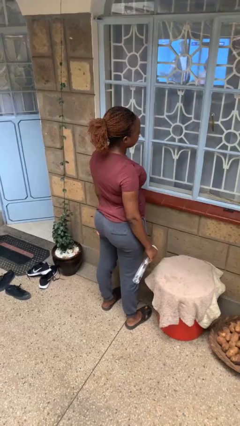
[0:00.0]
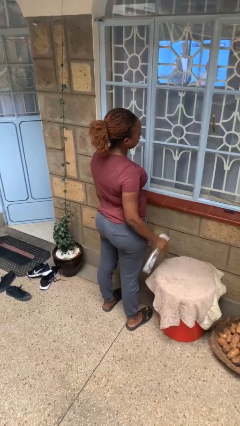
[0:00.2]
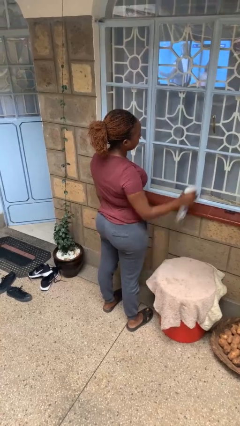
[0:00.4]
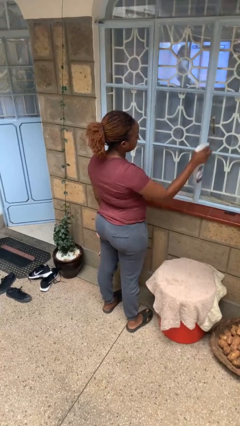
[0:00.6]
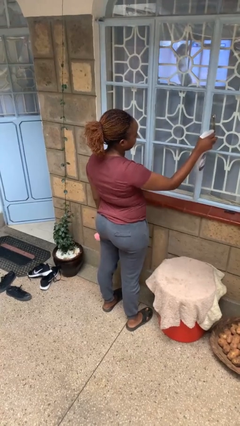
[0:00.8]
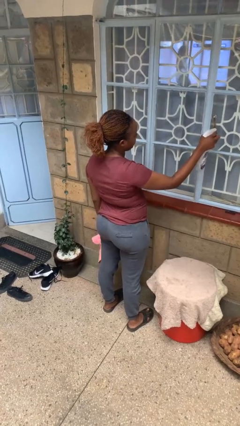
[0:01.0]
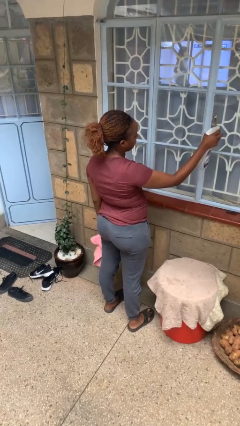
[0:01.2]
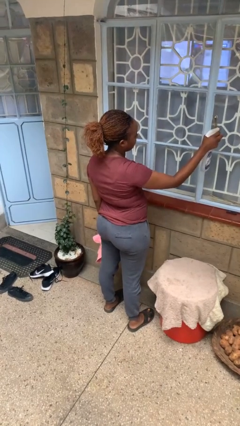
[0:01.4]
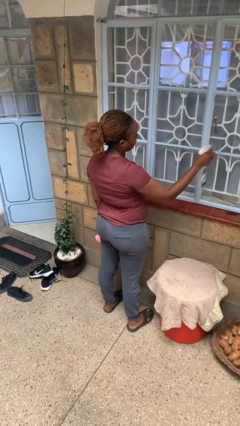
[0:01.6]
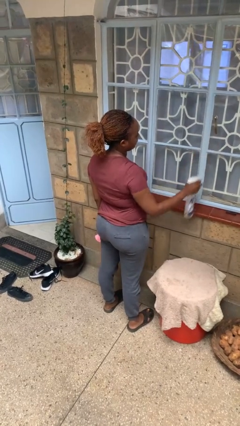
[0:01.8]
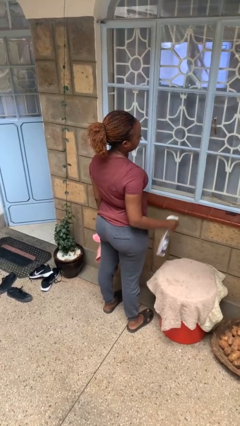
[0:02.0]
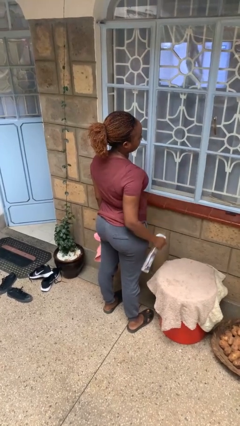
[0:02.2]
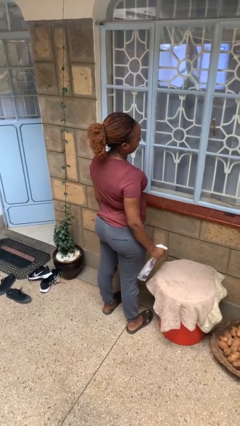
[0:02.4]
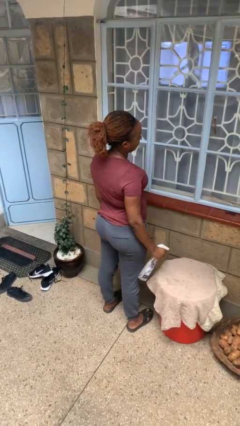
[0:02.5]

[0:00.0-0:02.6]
person sprays from bottle

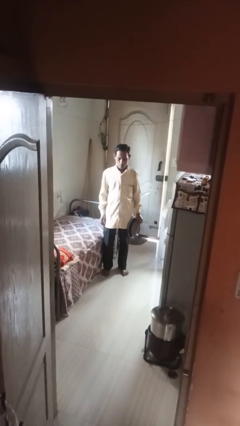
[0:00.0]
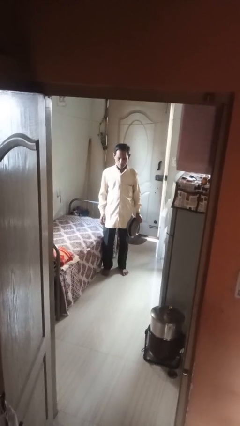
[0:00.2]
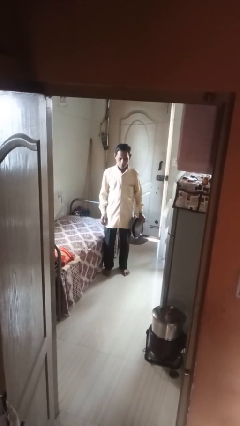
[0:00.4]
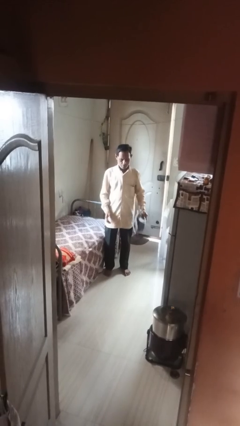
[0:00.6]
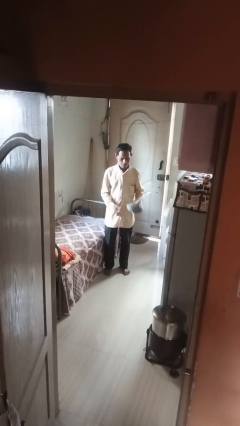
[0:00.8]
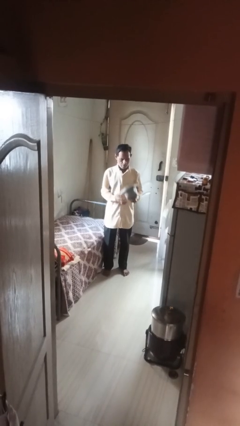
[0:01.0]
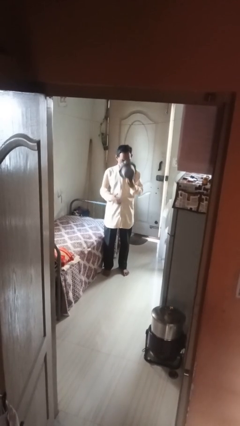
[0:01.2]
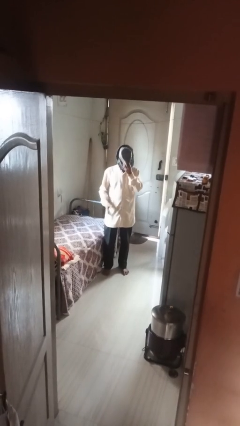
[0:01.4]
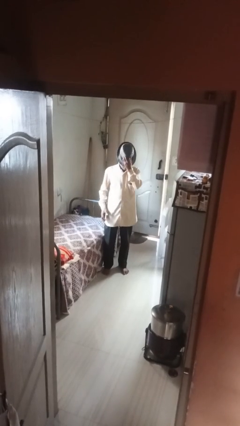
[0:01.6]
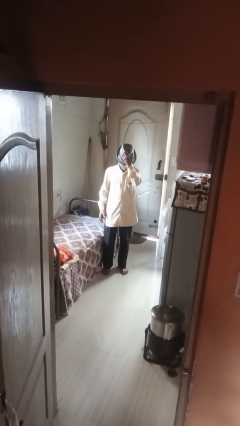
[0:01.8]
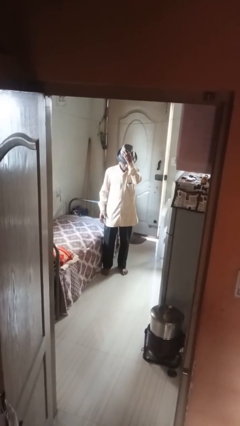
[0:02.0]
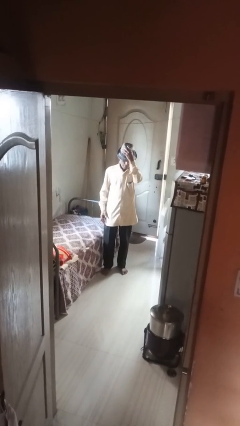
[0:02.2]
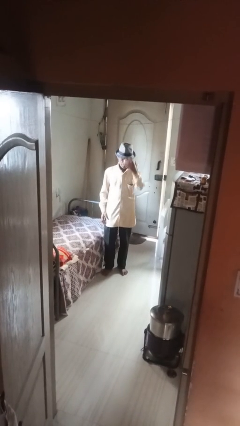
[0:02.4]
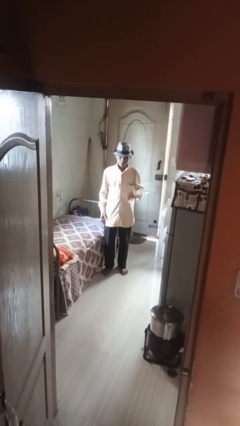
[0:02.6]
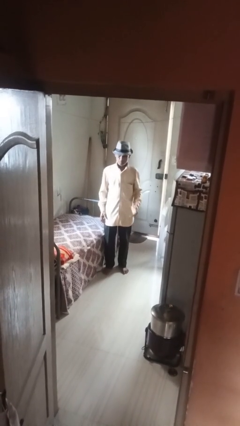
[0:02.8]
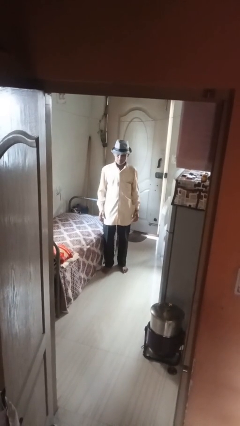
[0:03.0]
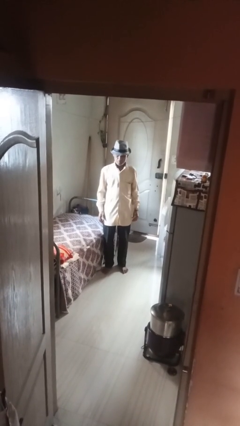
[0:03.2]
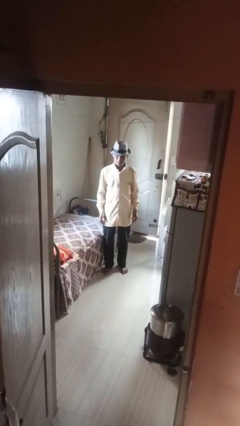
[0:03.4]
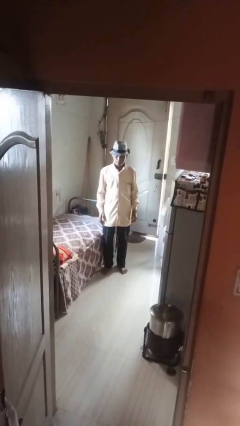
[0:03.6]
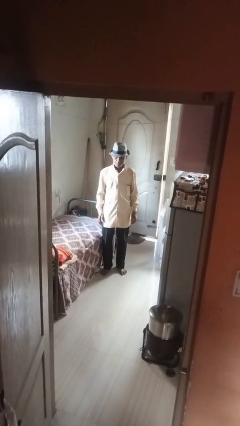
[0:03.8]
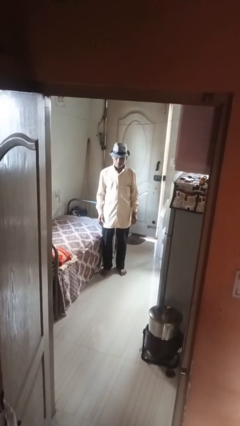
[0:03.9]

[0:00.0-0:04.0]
person puts on hat

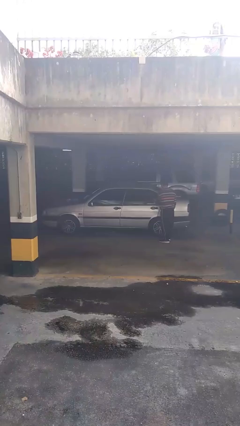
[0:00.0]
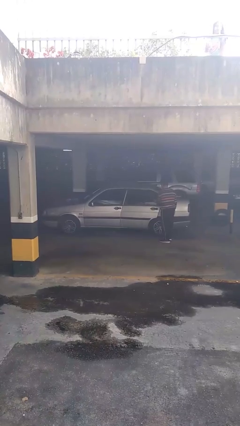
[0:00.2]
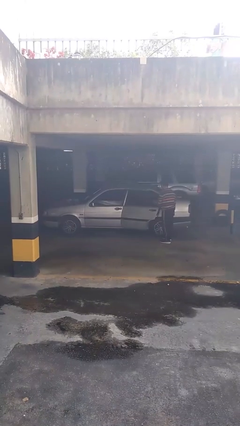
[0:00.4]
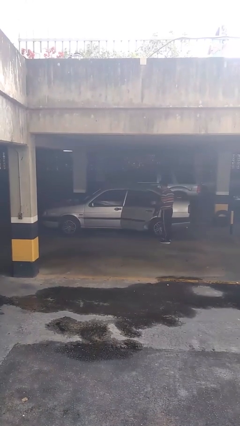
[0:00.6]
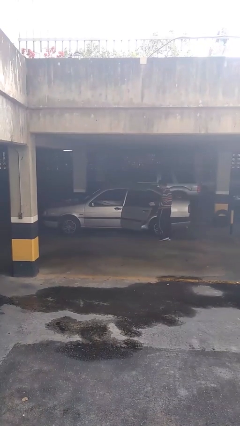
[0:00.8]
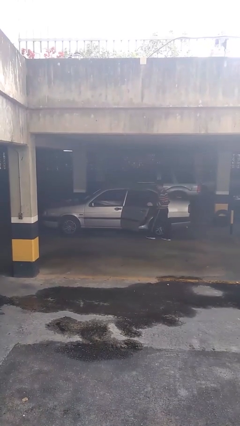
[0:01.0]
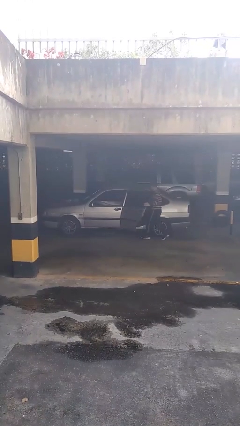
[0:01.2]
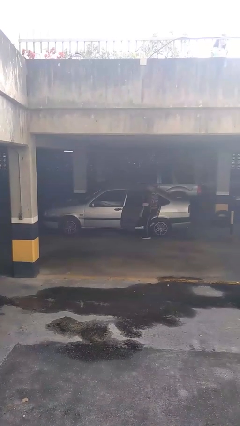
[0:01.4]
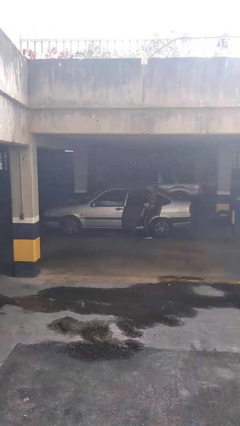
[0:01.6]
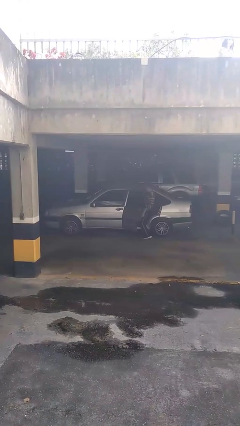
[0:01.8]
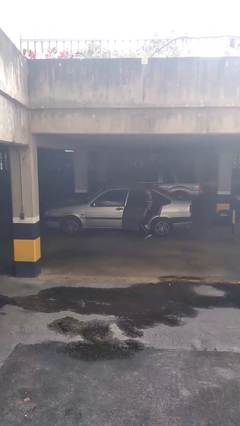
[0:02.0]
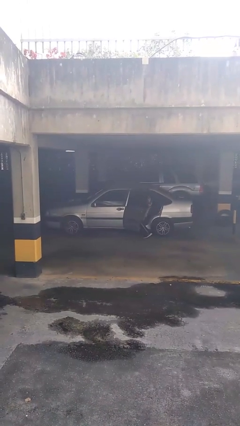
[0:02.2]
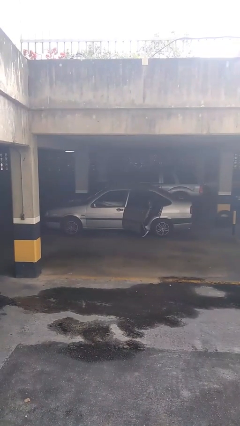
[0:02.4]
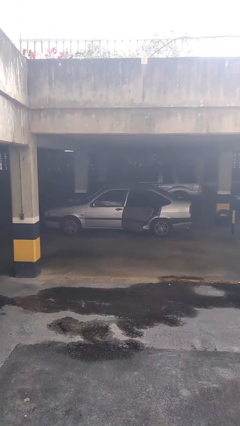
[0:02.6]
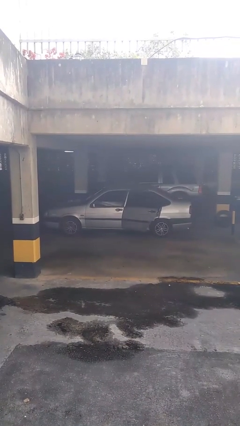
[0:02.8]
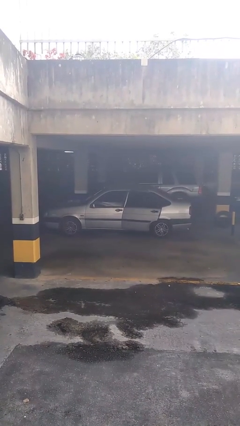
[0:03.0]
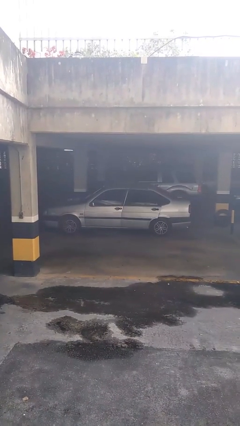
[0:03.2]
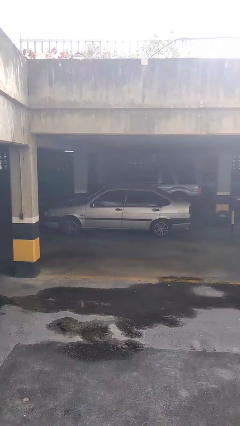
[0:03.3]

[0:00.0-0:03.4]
car picks up person

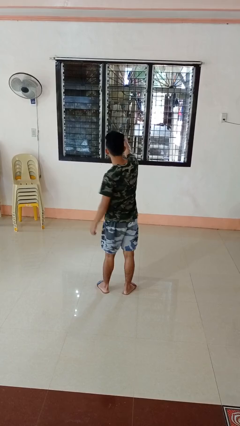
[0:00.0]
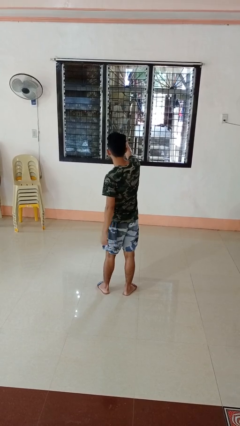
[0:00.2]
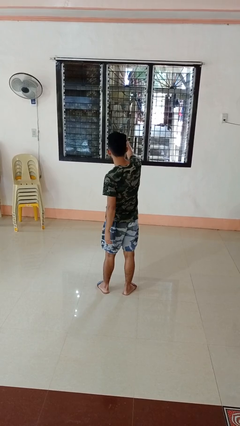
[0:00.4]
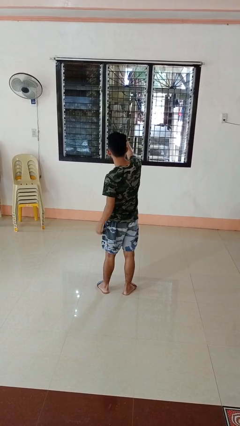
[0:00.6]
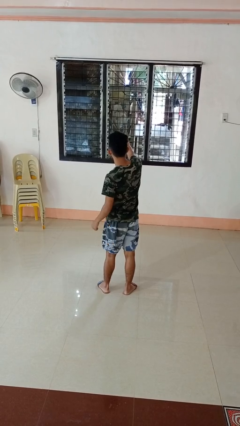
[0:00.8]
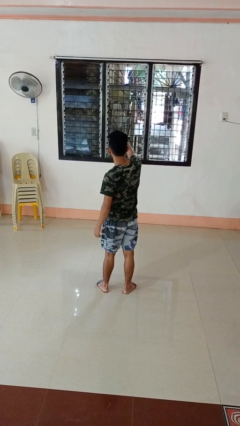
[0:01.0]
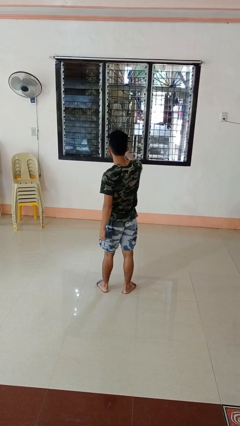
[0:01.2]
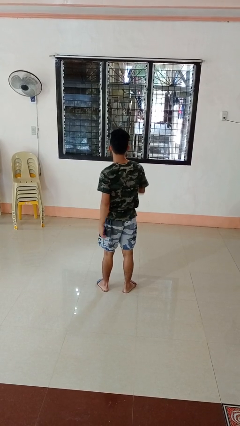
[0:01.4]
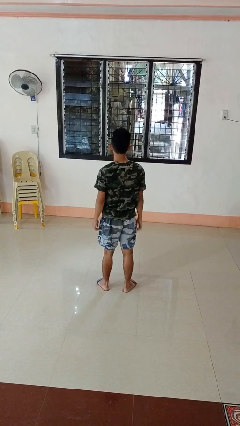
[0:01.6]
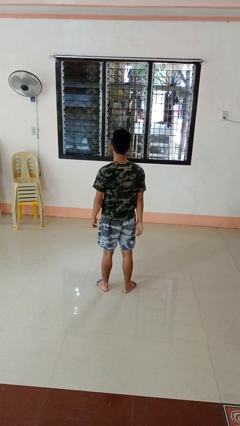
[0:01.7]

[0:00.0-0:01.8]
person punches

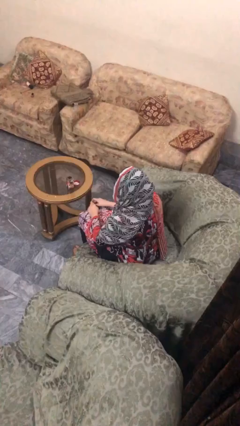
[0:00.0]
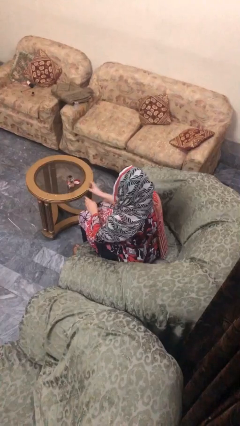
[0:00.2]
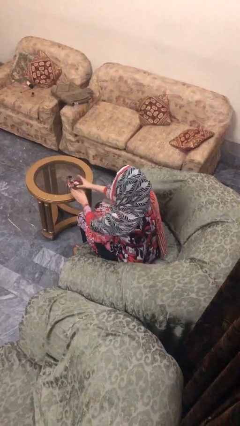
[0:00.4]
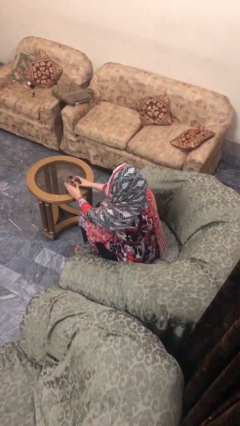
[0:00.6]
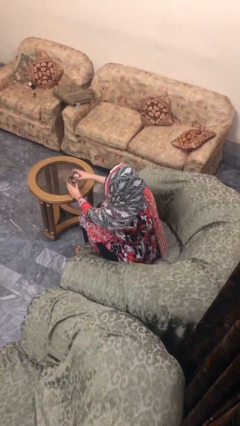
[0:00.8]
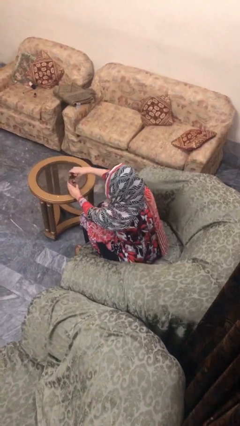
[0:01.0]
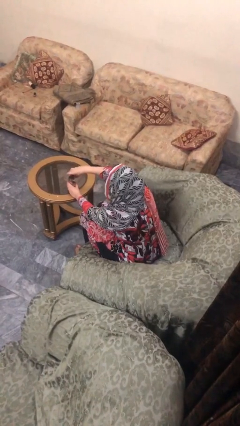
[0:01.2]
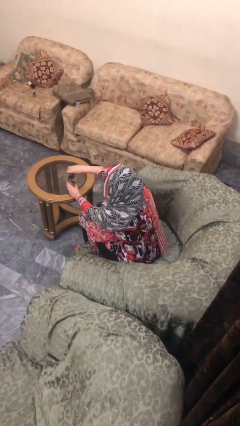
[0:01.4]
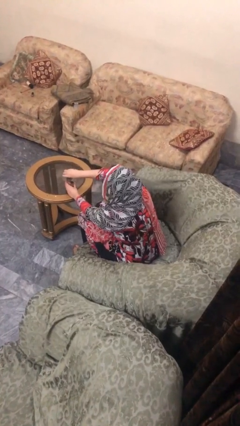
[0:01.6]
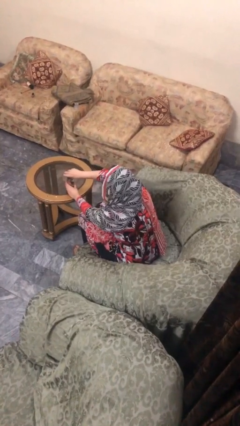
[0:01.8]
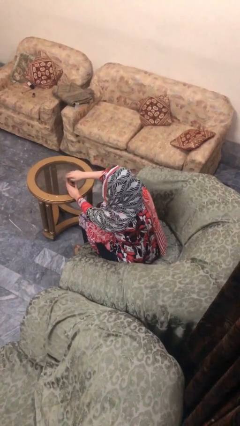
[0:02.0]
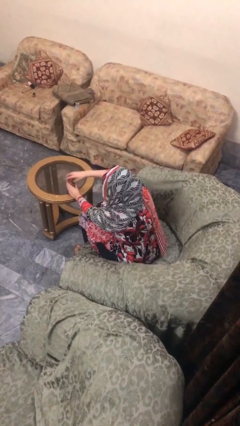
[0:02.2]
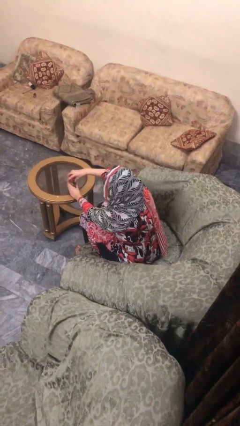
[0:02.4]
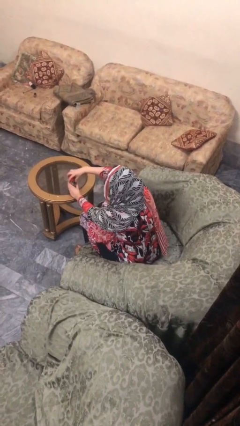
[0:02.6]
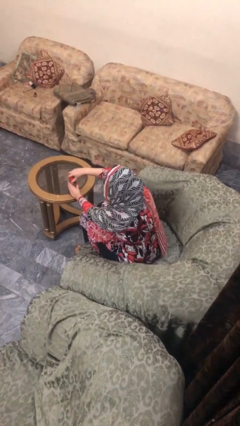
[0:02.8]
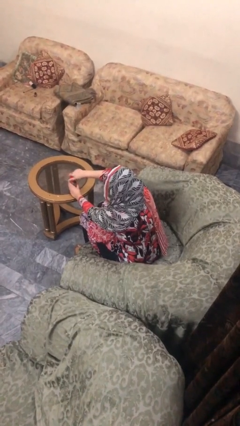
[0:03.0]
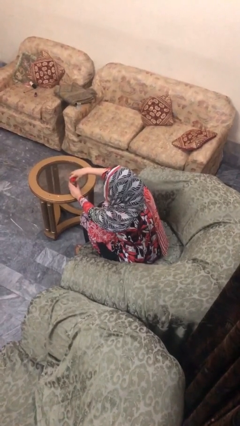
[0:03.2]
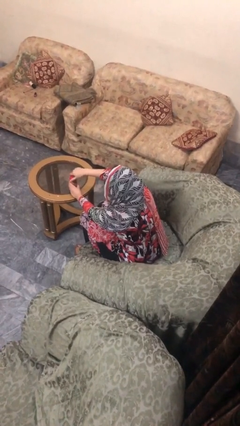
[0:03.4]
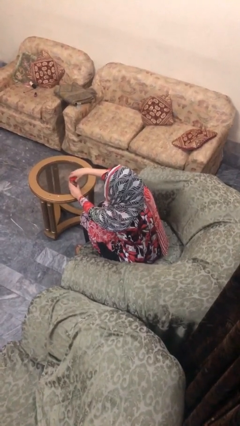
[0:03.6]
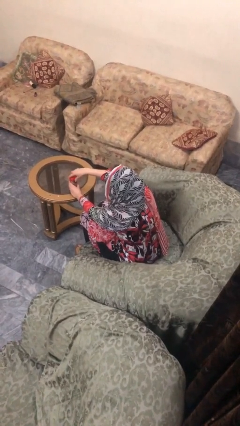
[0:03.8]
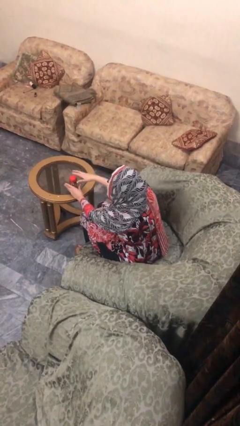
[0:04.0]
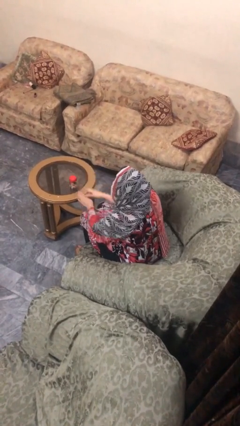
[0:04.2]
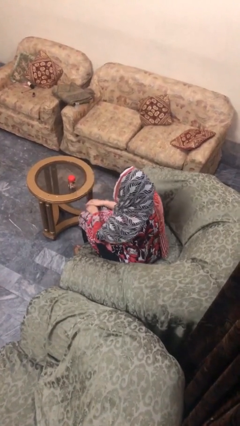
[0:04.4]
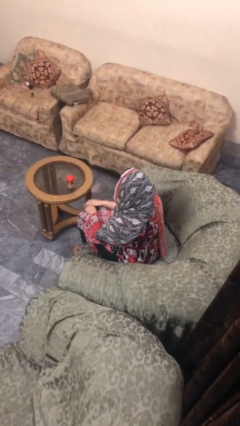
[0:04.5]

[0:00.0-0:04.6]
person closes jar

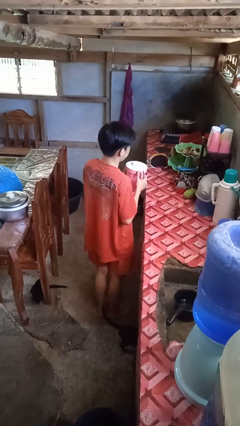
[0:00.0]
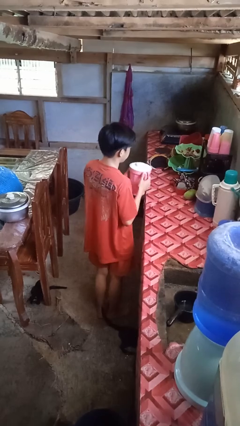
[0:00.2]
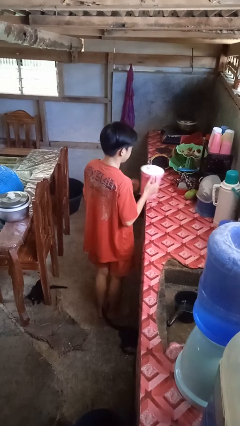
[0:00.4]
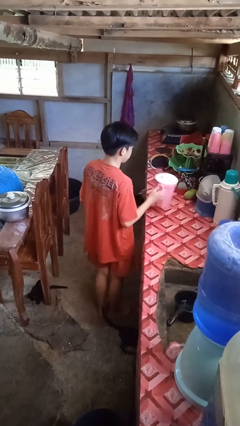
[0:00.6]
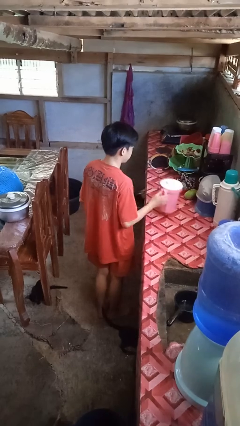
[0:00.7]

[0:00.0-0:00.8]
person puts down object on countertop
